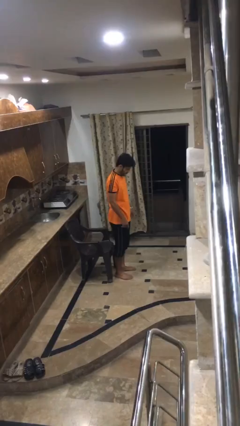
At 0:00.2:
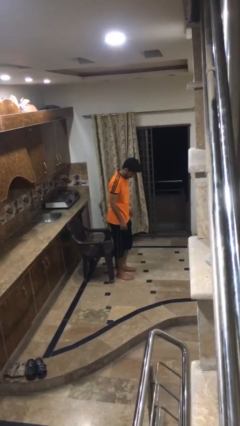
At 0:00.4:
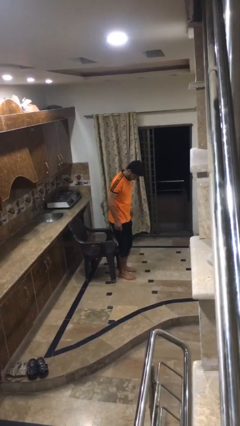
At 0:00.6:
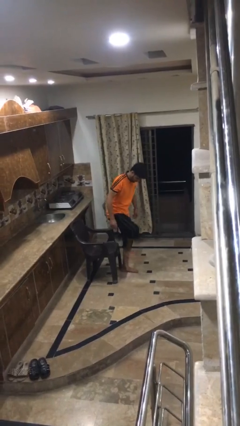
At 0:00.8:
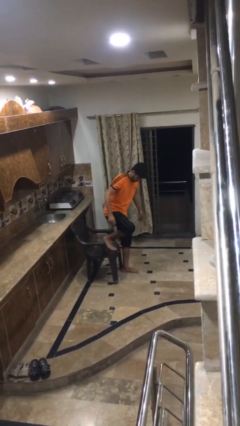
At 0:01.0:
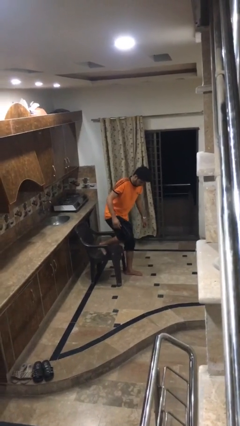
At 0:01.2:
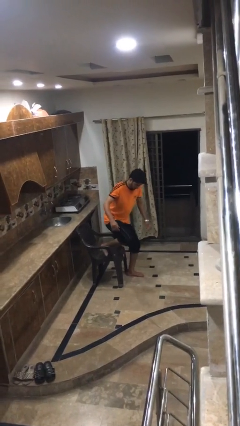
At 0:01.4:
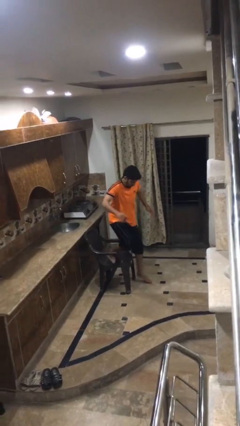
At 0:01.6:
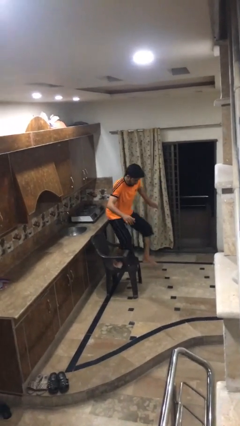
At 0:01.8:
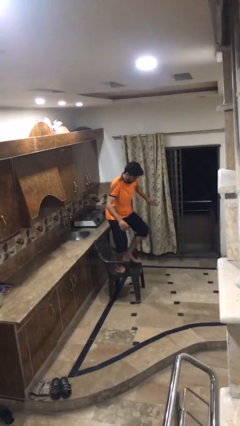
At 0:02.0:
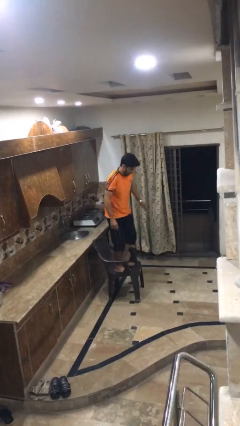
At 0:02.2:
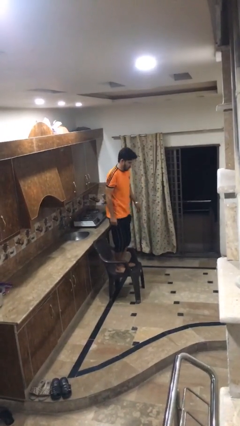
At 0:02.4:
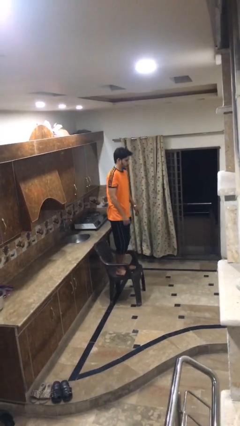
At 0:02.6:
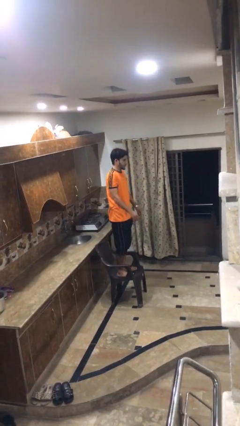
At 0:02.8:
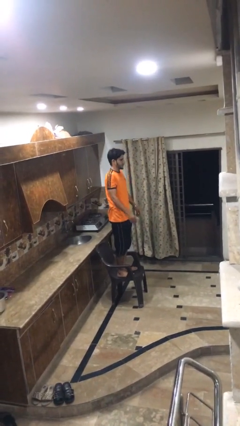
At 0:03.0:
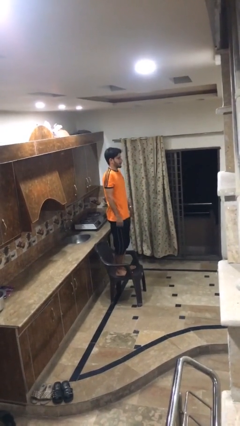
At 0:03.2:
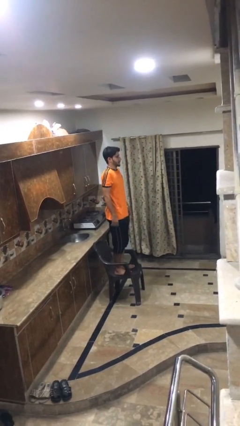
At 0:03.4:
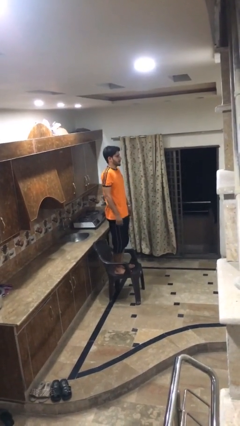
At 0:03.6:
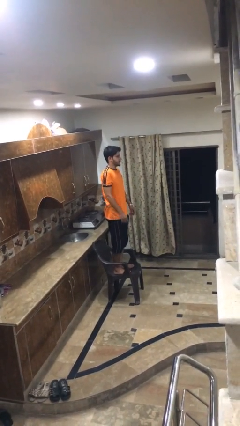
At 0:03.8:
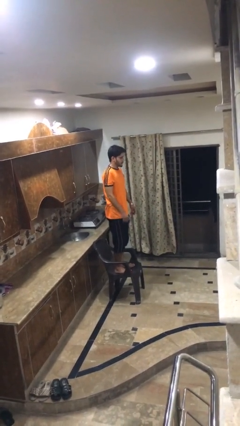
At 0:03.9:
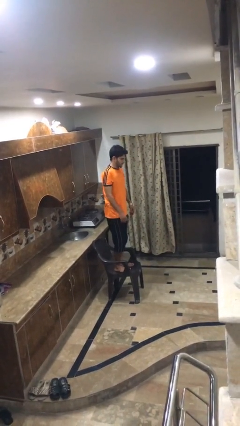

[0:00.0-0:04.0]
person climbs on chair

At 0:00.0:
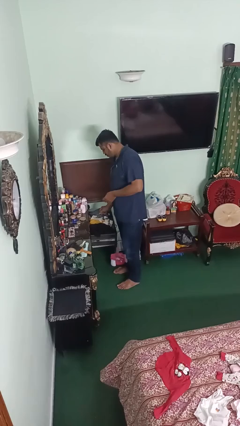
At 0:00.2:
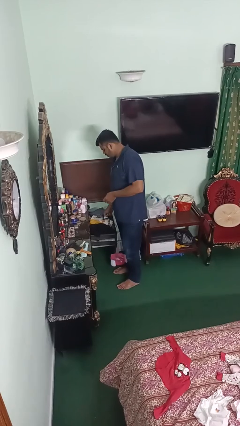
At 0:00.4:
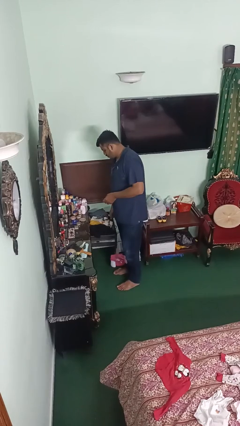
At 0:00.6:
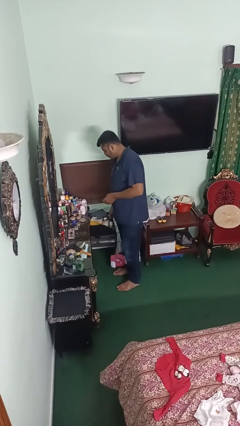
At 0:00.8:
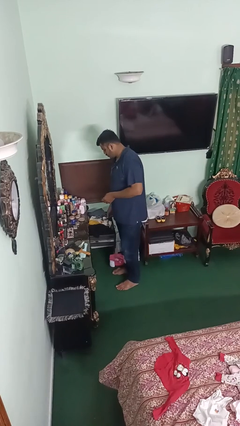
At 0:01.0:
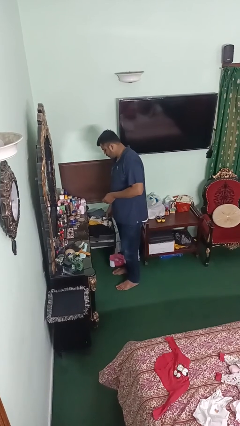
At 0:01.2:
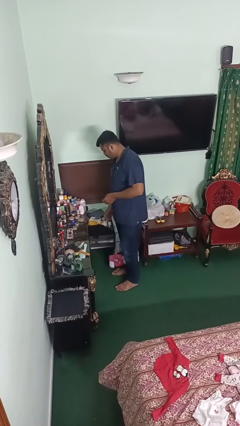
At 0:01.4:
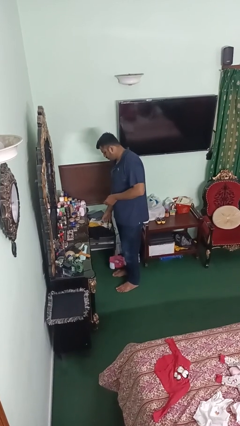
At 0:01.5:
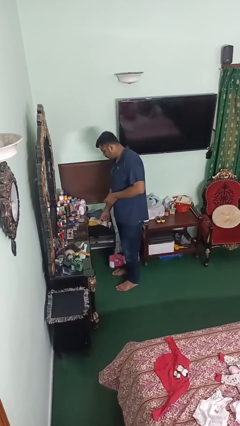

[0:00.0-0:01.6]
person puts clothes into dresser

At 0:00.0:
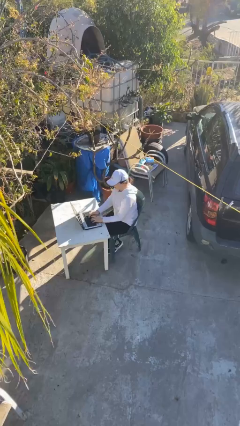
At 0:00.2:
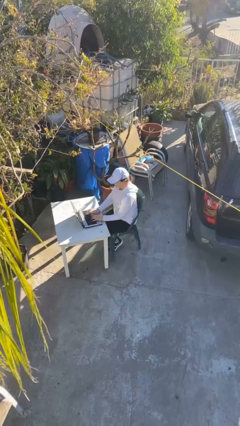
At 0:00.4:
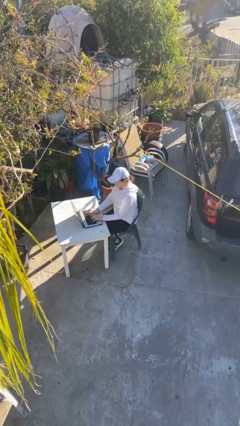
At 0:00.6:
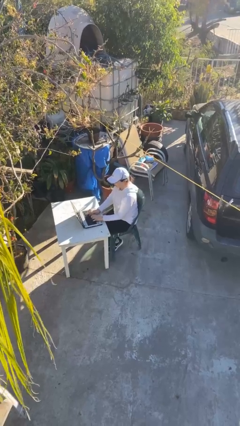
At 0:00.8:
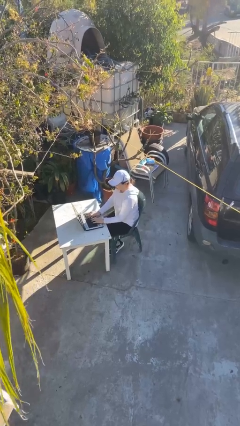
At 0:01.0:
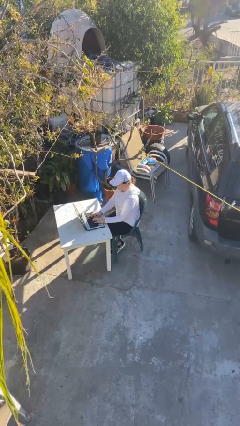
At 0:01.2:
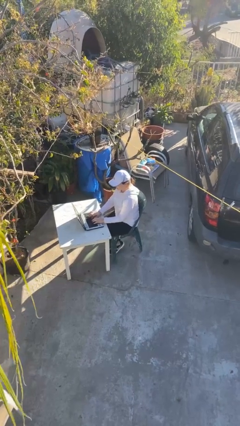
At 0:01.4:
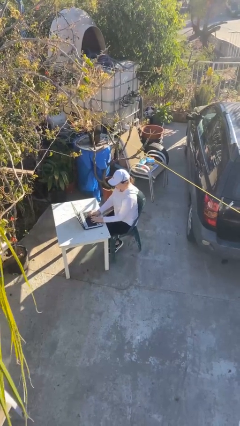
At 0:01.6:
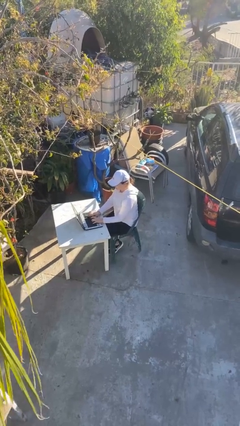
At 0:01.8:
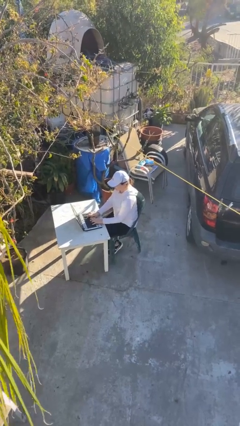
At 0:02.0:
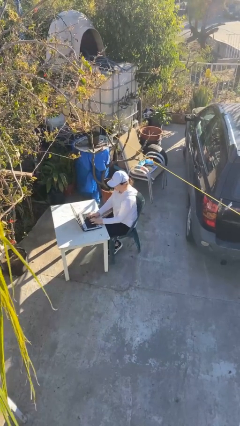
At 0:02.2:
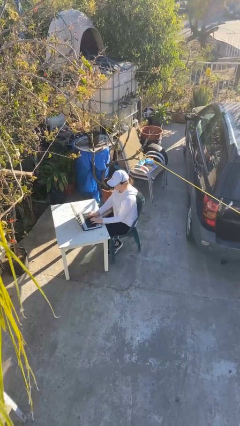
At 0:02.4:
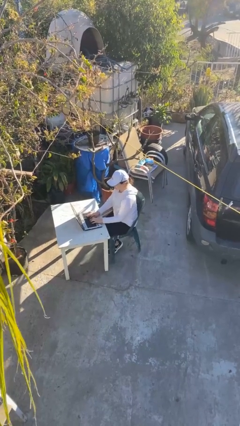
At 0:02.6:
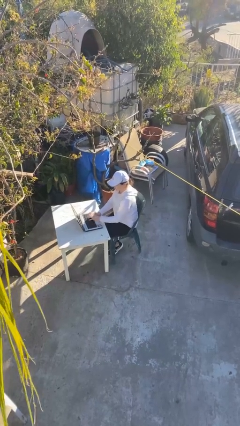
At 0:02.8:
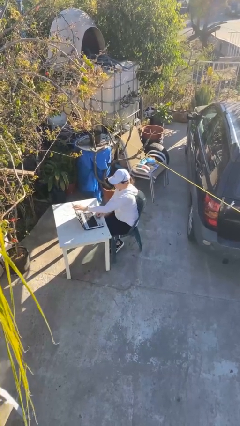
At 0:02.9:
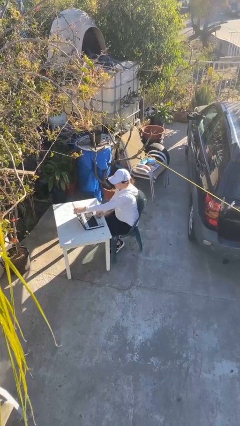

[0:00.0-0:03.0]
person interacts with laptop

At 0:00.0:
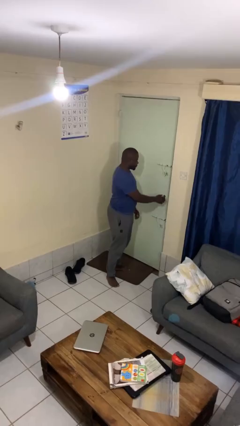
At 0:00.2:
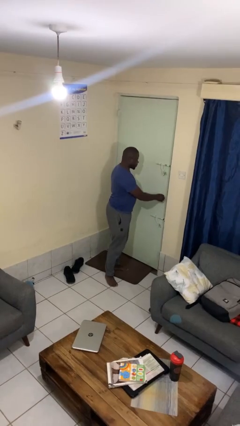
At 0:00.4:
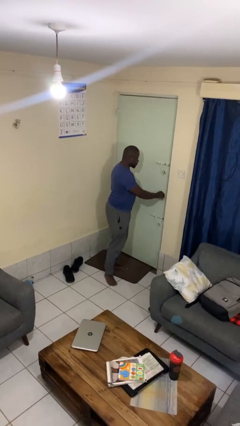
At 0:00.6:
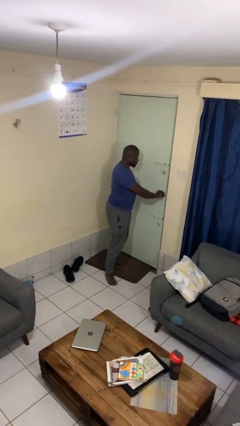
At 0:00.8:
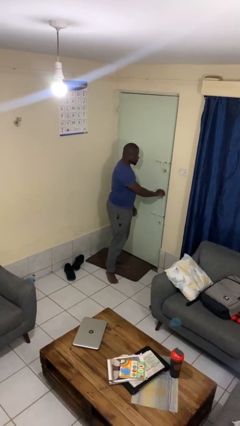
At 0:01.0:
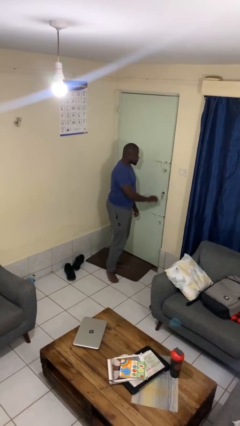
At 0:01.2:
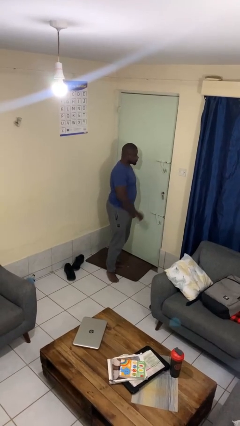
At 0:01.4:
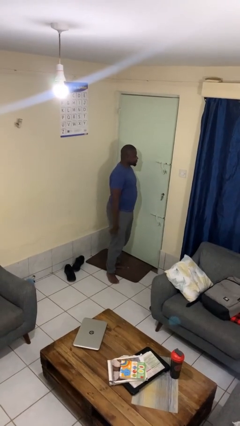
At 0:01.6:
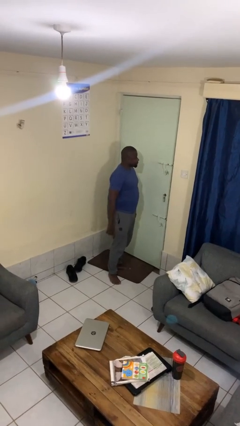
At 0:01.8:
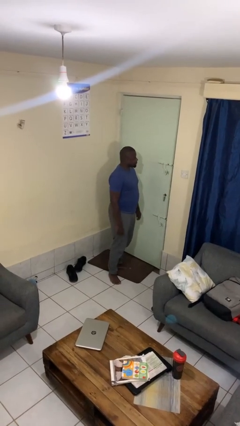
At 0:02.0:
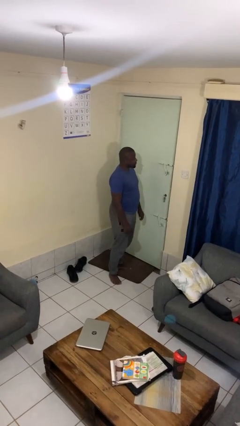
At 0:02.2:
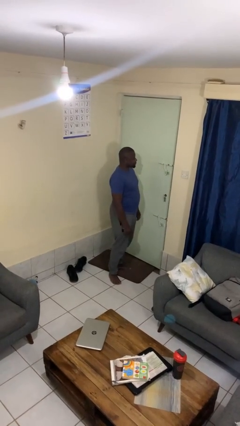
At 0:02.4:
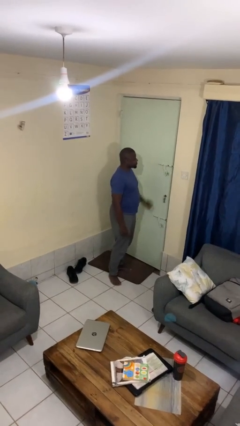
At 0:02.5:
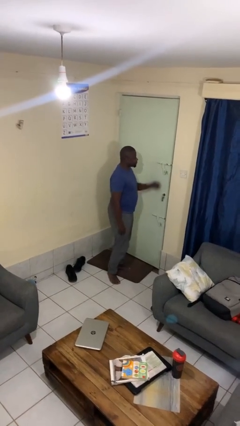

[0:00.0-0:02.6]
person unlocks door with keys

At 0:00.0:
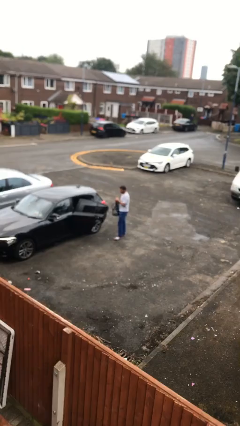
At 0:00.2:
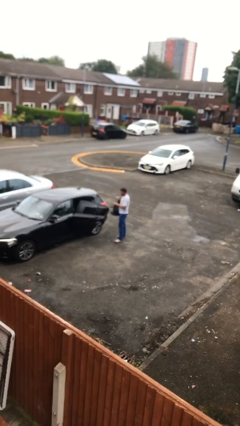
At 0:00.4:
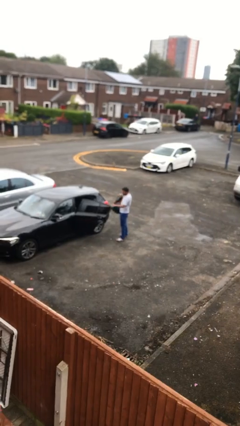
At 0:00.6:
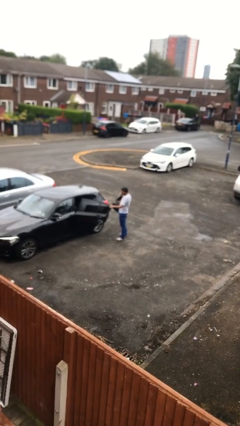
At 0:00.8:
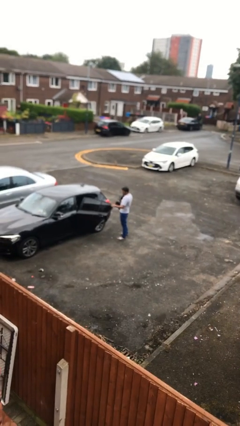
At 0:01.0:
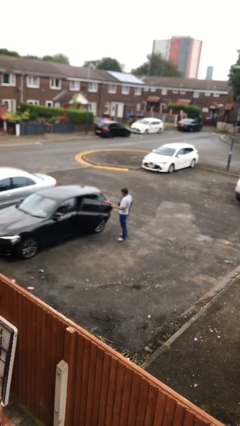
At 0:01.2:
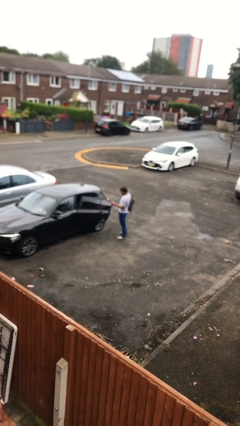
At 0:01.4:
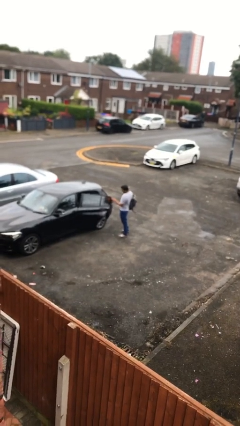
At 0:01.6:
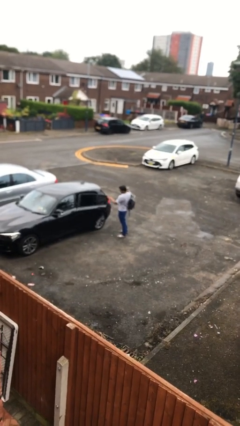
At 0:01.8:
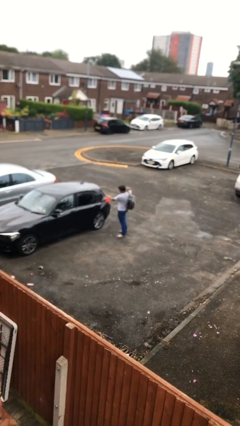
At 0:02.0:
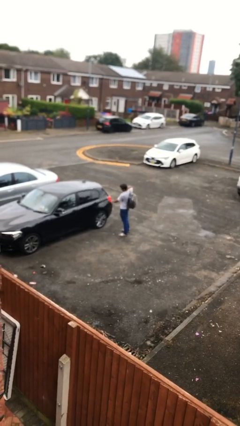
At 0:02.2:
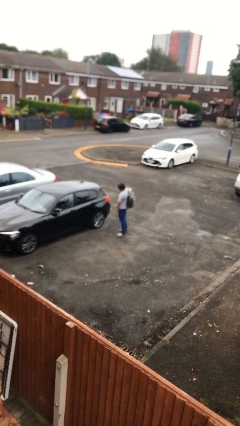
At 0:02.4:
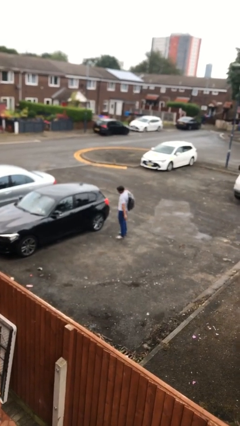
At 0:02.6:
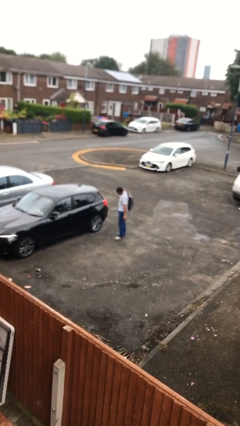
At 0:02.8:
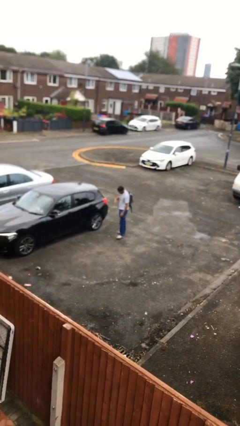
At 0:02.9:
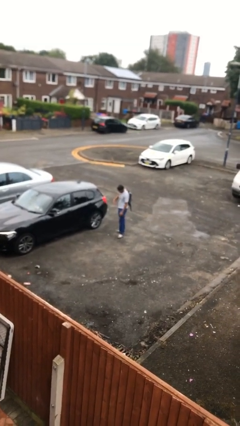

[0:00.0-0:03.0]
person closes car door

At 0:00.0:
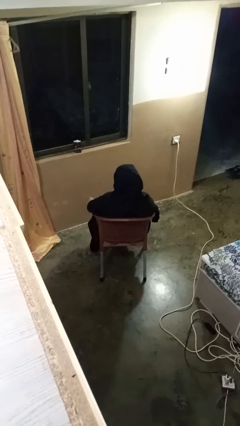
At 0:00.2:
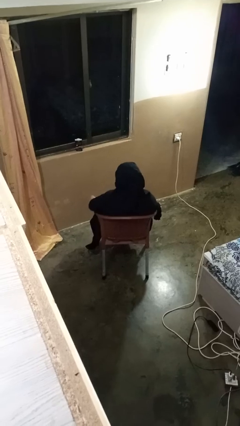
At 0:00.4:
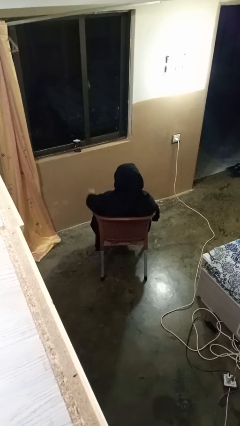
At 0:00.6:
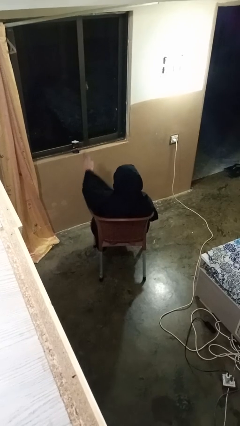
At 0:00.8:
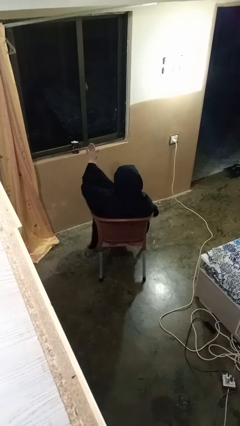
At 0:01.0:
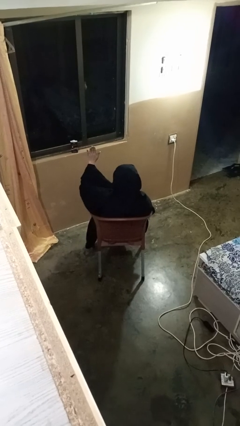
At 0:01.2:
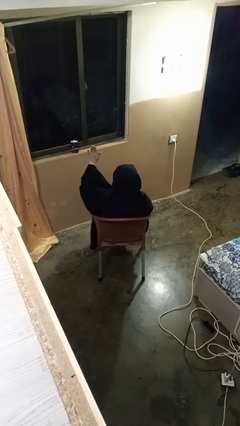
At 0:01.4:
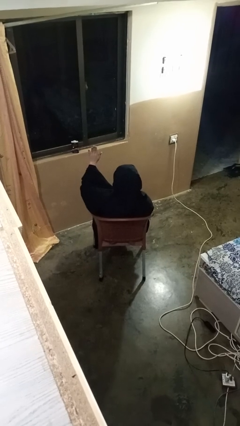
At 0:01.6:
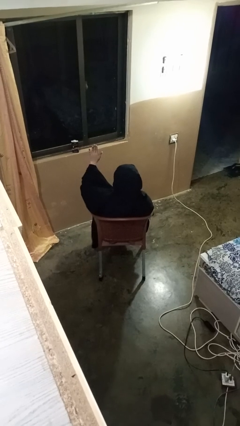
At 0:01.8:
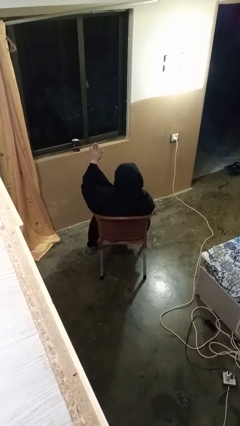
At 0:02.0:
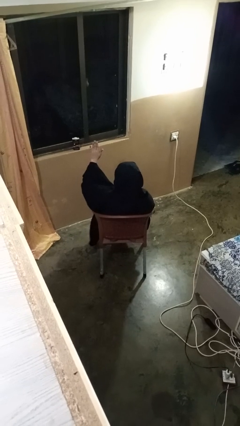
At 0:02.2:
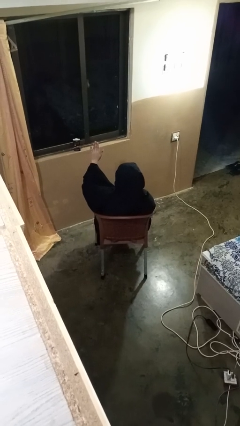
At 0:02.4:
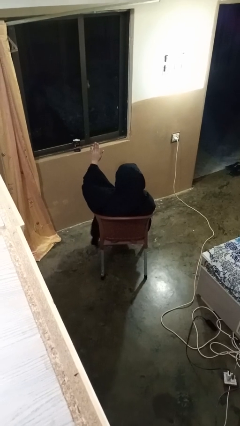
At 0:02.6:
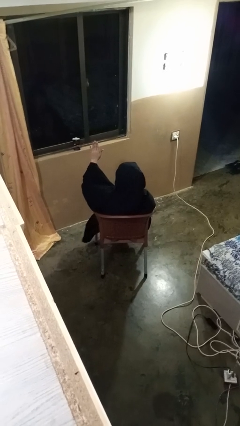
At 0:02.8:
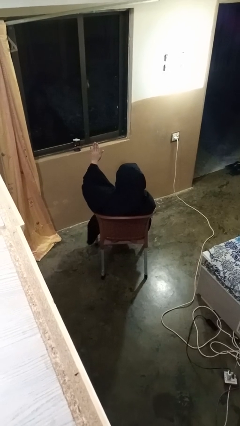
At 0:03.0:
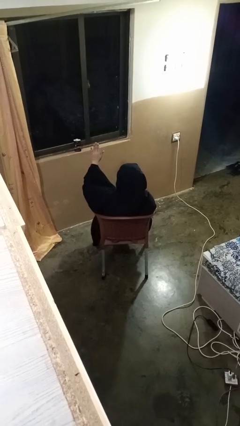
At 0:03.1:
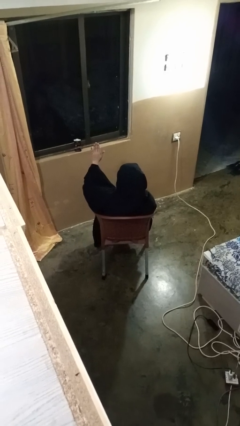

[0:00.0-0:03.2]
person gestures swipe up
